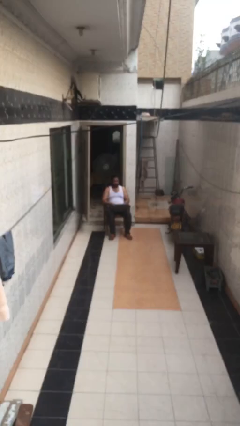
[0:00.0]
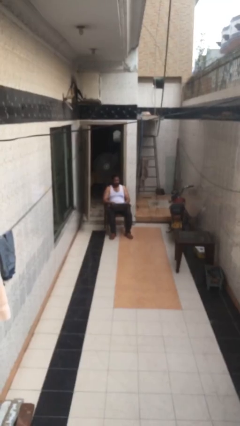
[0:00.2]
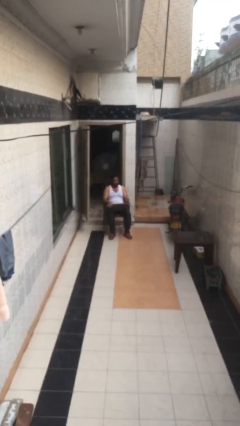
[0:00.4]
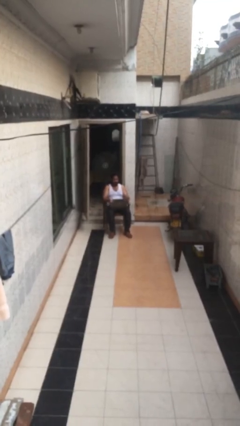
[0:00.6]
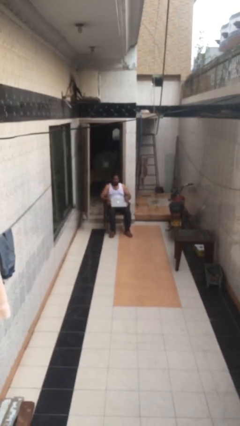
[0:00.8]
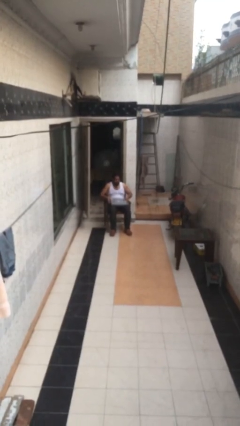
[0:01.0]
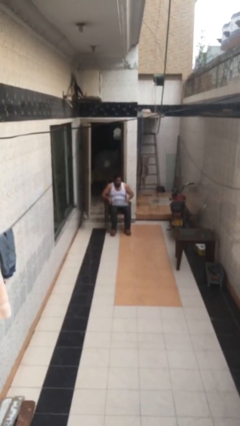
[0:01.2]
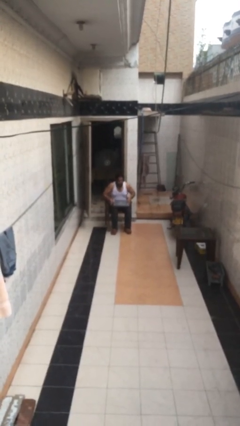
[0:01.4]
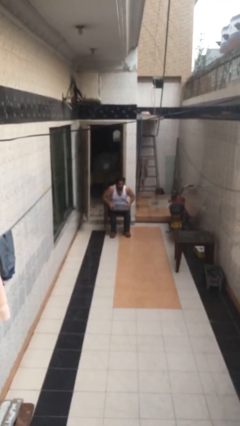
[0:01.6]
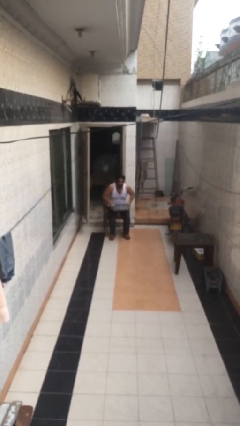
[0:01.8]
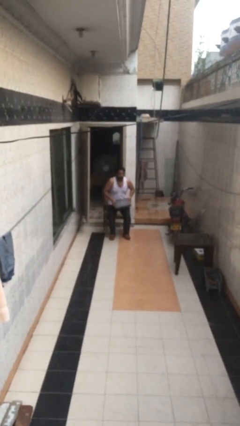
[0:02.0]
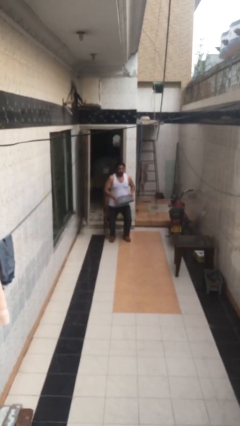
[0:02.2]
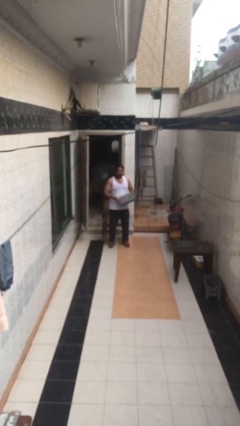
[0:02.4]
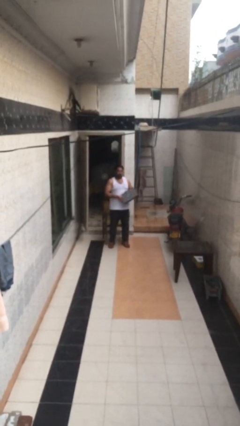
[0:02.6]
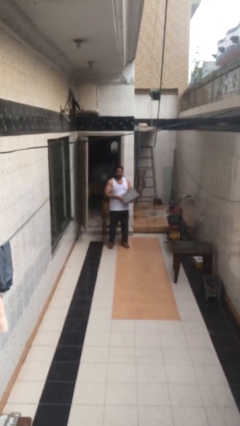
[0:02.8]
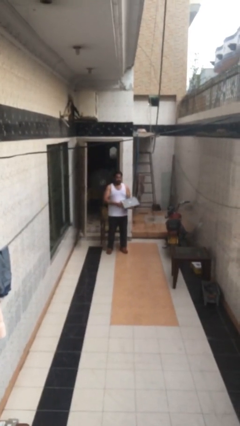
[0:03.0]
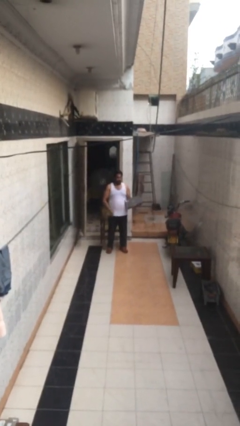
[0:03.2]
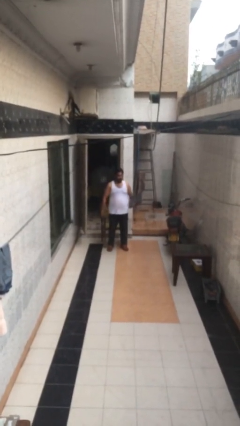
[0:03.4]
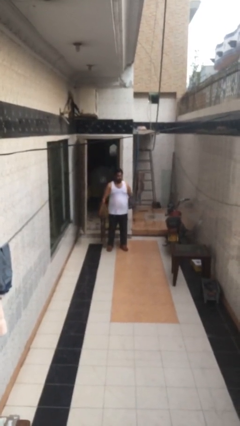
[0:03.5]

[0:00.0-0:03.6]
person stands up

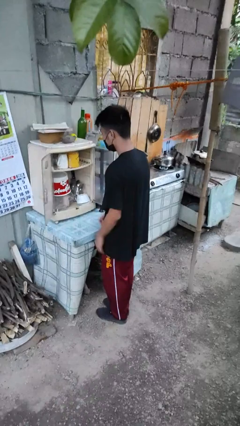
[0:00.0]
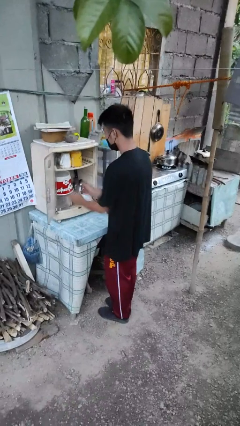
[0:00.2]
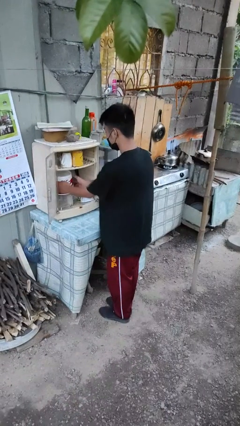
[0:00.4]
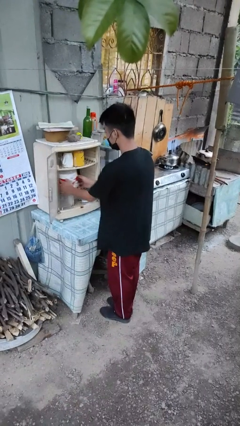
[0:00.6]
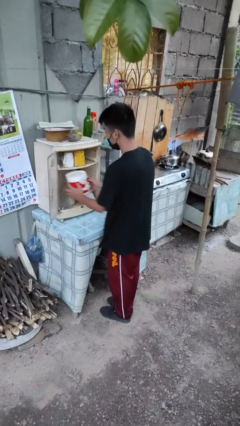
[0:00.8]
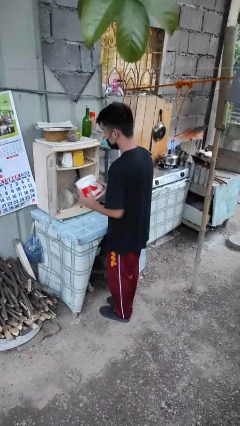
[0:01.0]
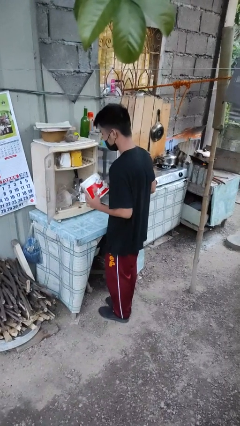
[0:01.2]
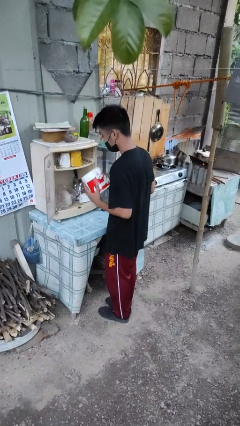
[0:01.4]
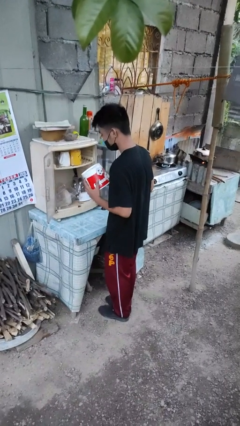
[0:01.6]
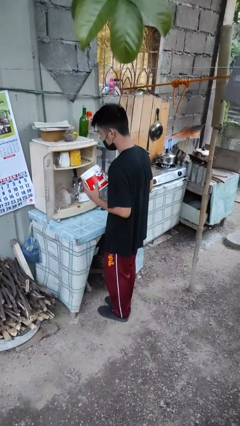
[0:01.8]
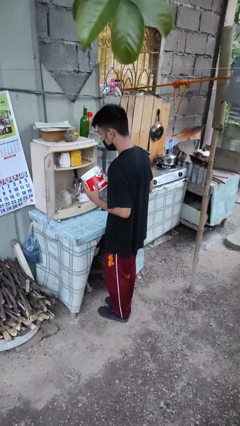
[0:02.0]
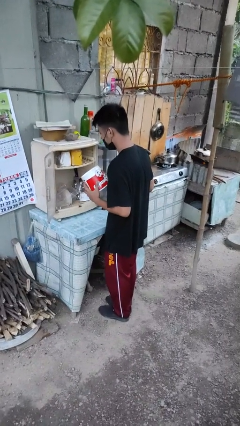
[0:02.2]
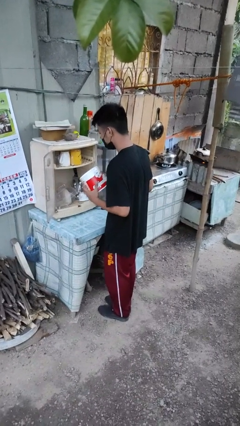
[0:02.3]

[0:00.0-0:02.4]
person picks up object from cabinet

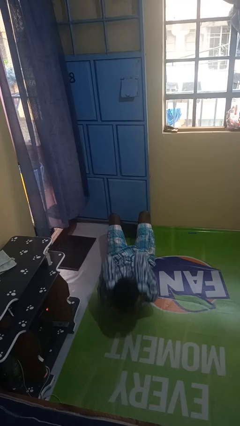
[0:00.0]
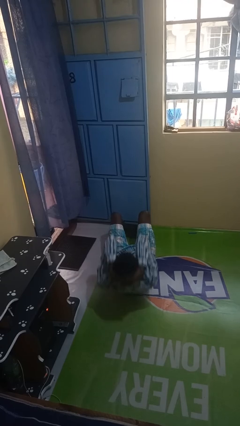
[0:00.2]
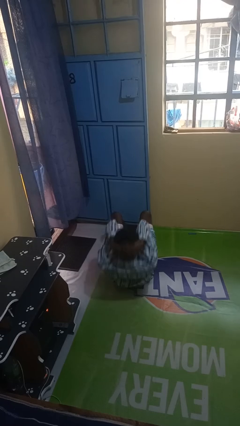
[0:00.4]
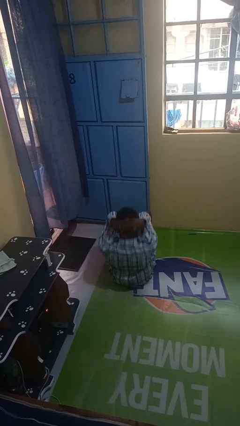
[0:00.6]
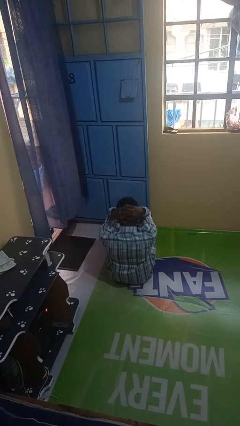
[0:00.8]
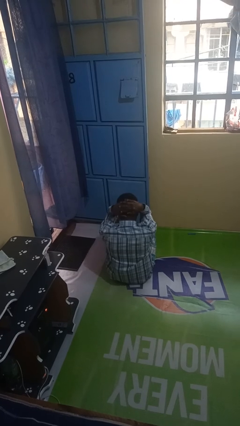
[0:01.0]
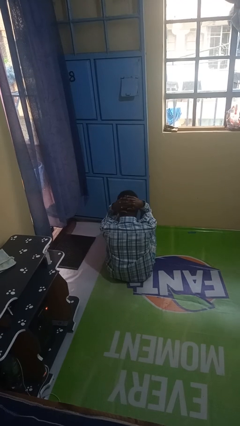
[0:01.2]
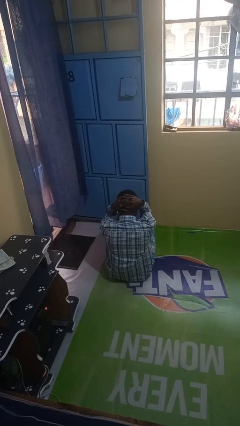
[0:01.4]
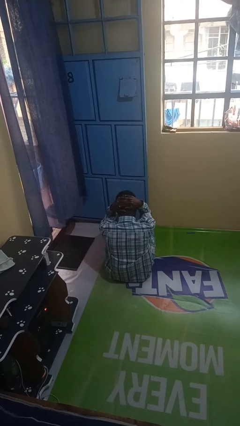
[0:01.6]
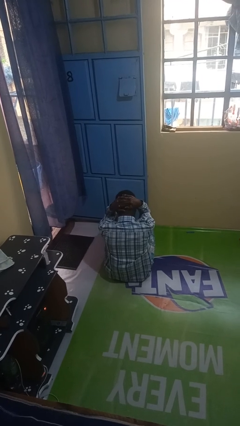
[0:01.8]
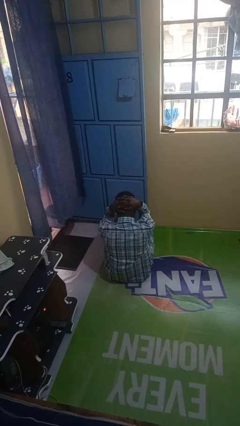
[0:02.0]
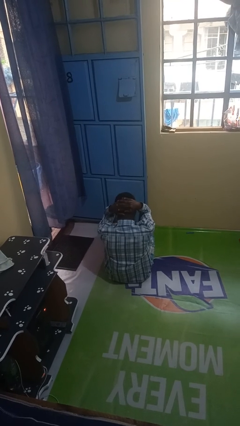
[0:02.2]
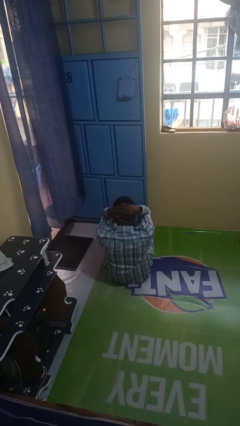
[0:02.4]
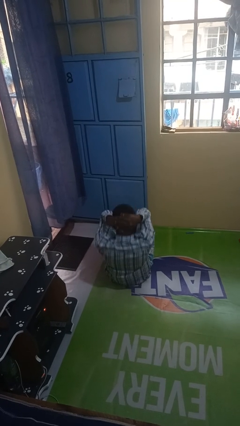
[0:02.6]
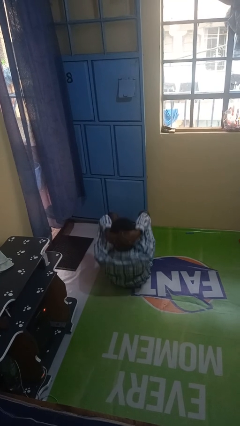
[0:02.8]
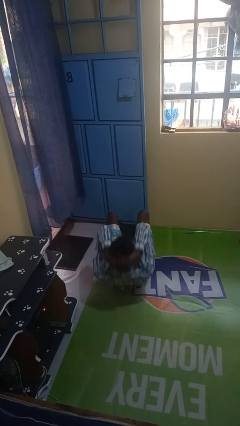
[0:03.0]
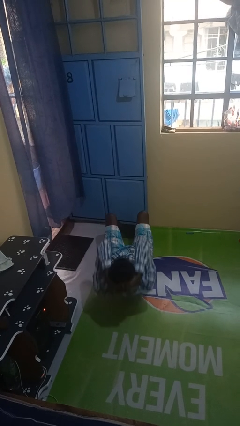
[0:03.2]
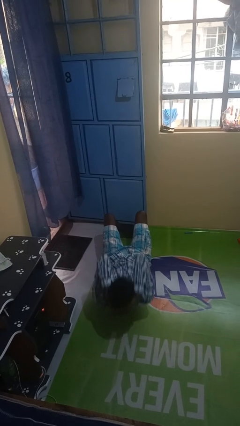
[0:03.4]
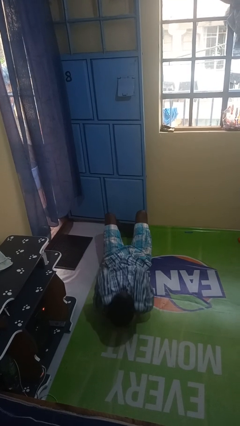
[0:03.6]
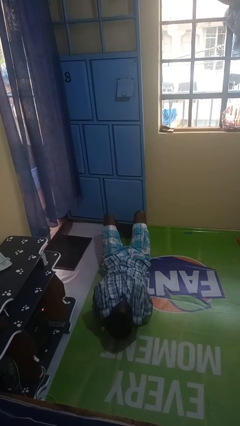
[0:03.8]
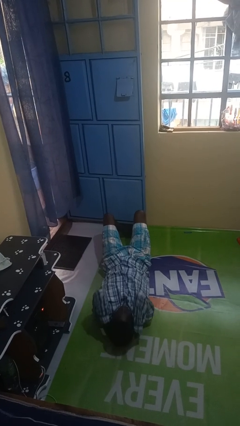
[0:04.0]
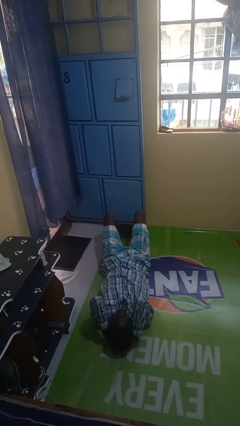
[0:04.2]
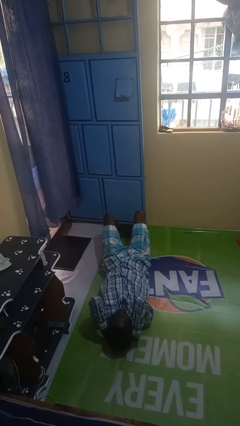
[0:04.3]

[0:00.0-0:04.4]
person exercises with situp

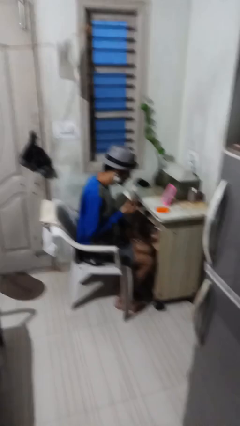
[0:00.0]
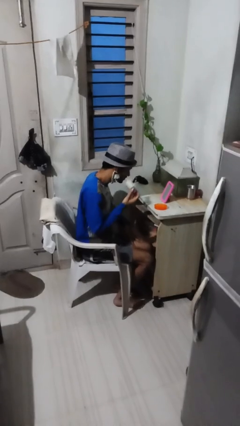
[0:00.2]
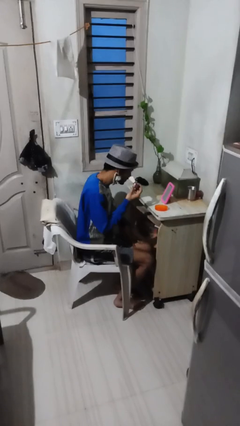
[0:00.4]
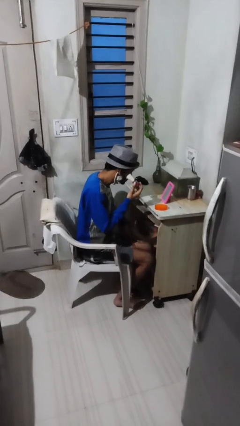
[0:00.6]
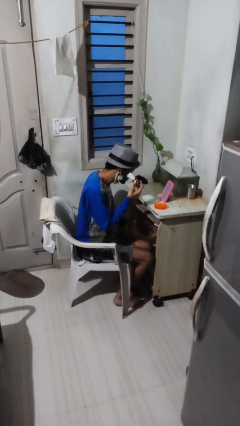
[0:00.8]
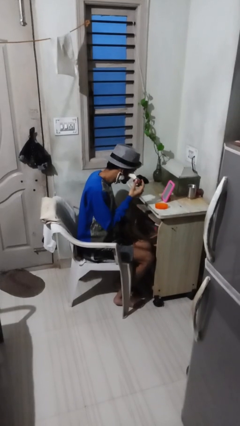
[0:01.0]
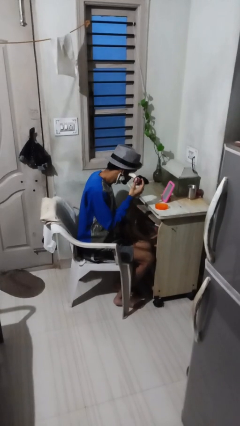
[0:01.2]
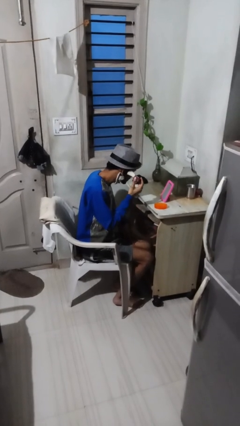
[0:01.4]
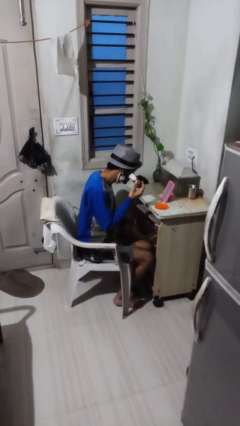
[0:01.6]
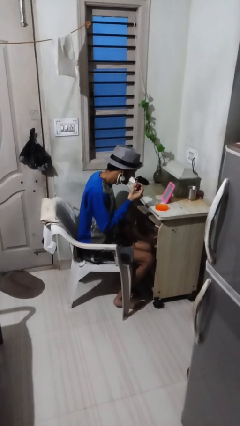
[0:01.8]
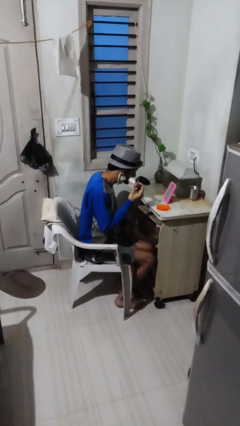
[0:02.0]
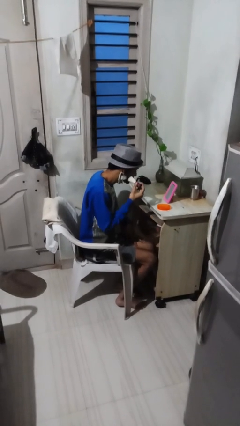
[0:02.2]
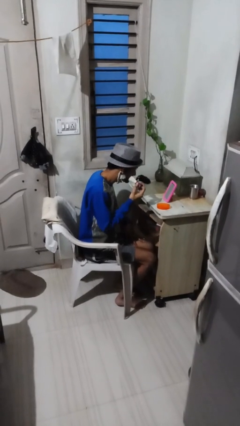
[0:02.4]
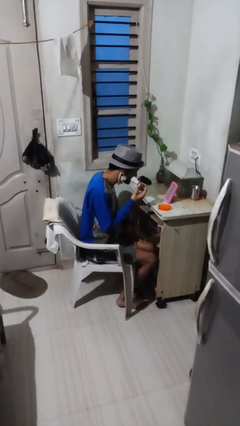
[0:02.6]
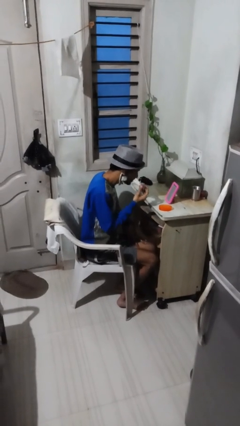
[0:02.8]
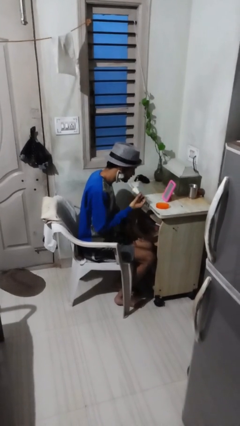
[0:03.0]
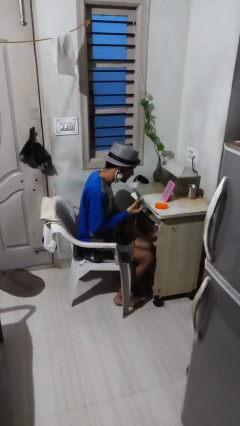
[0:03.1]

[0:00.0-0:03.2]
person applies foundation makeup

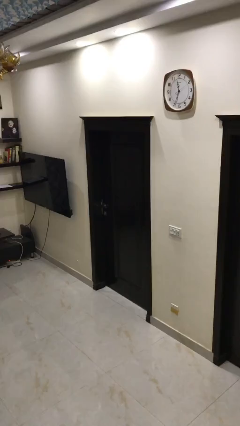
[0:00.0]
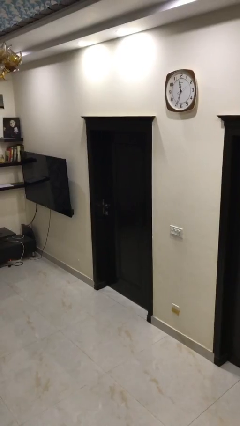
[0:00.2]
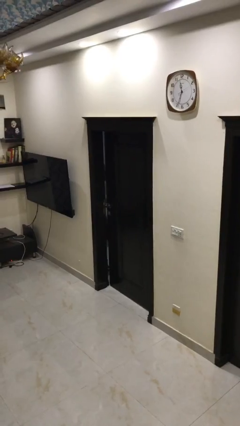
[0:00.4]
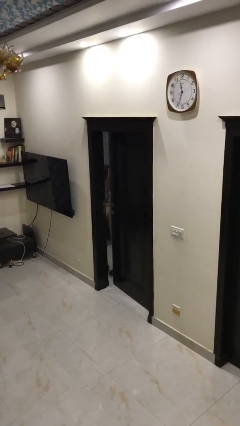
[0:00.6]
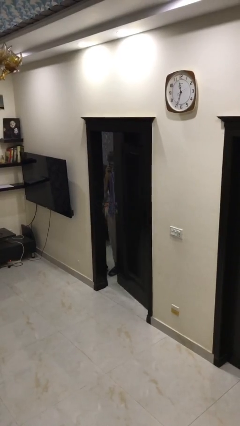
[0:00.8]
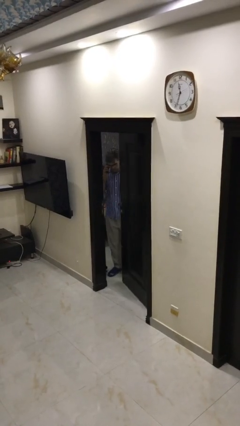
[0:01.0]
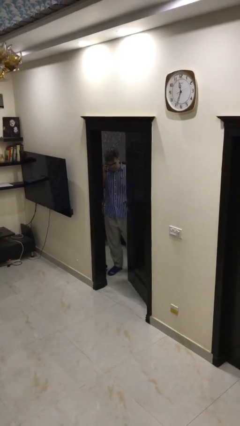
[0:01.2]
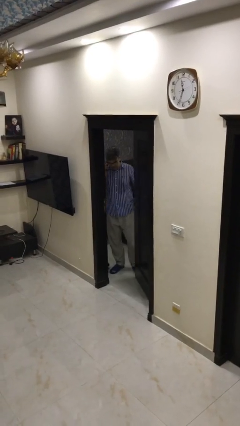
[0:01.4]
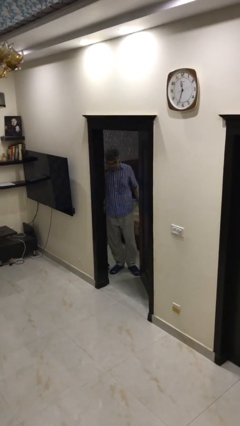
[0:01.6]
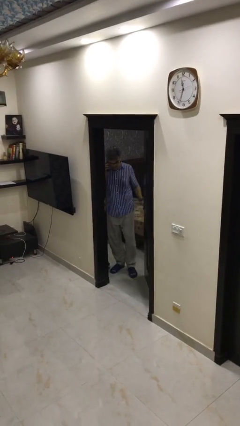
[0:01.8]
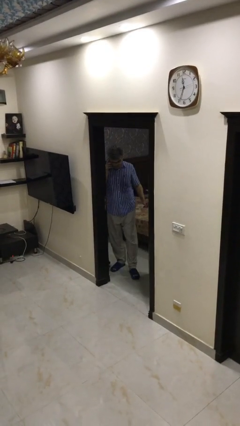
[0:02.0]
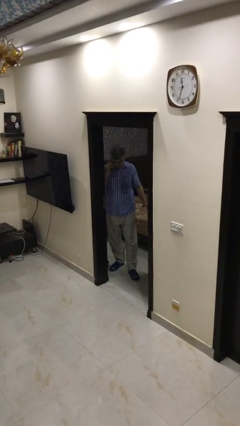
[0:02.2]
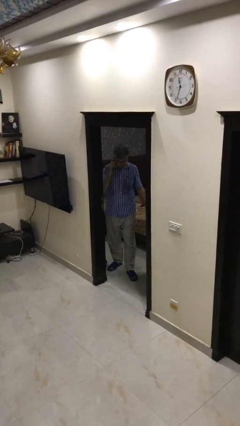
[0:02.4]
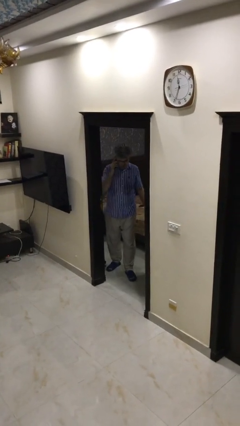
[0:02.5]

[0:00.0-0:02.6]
person opens facility door

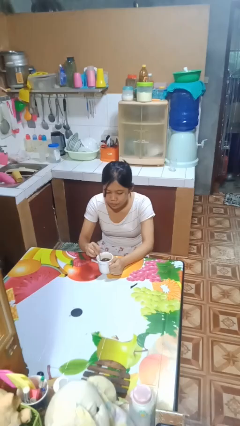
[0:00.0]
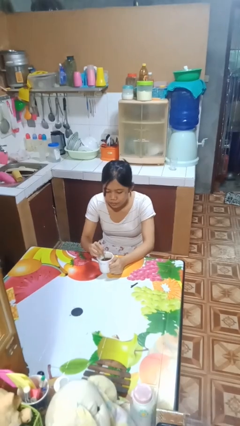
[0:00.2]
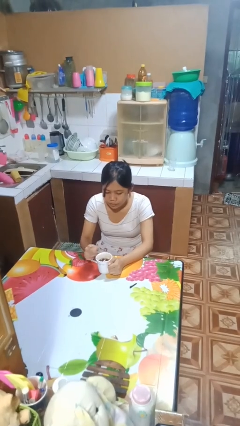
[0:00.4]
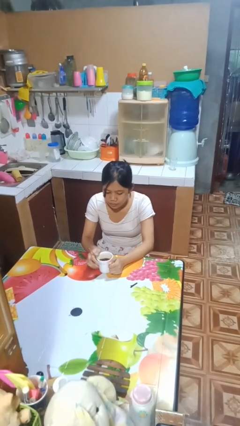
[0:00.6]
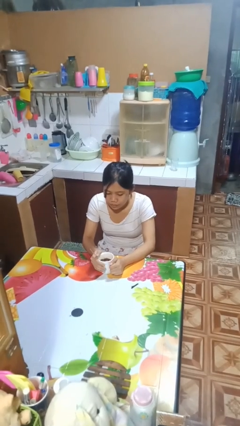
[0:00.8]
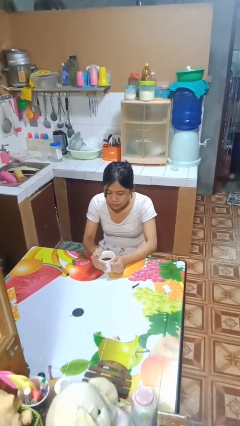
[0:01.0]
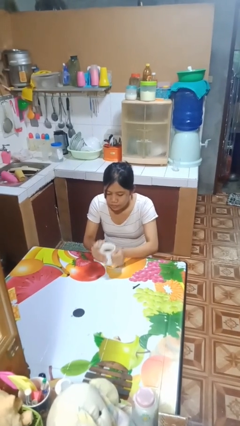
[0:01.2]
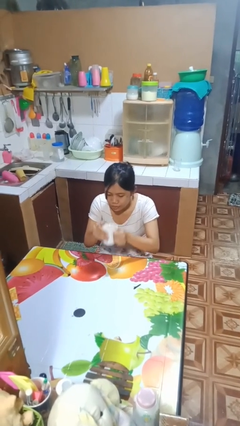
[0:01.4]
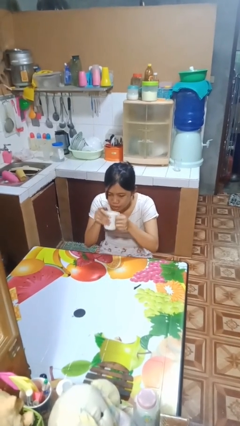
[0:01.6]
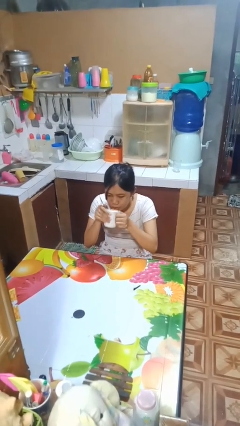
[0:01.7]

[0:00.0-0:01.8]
person stirs mug
